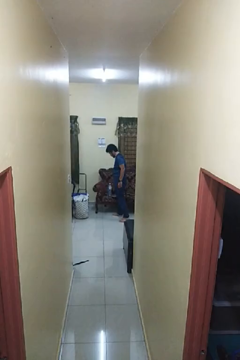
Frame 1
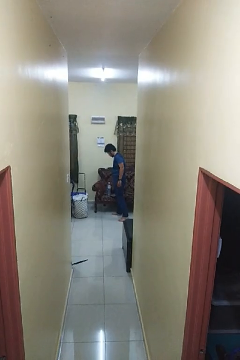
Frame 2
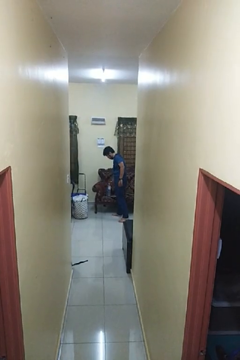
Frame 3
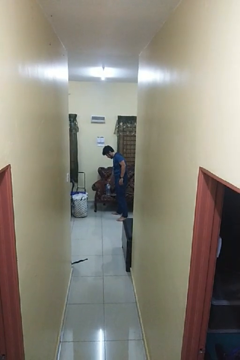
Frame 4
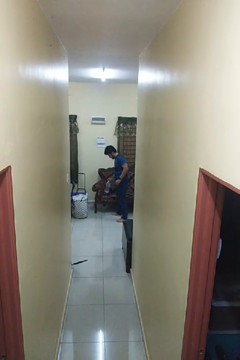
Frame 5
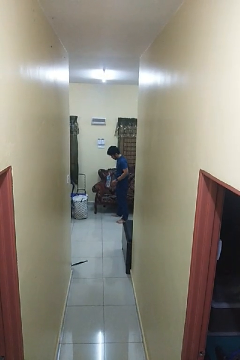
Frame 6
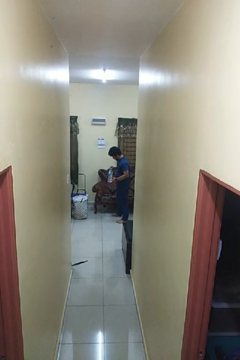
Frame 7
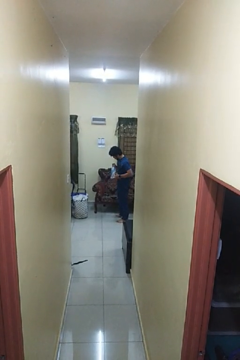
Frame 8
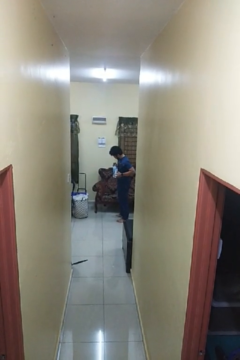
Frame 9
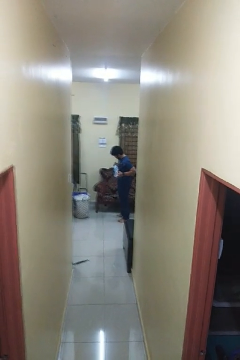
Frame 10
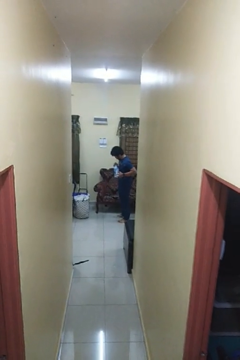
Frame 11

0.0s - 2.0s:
person picks up object from couch

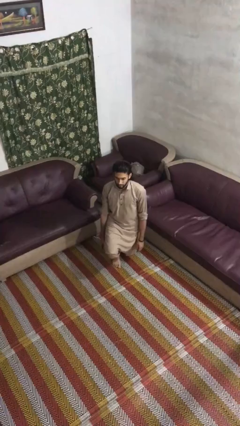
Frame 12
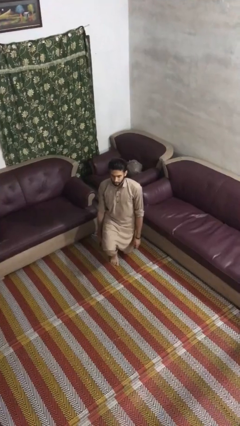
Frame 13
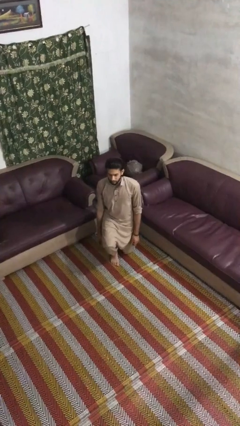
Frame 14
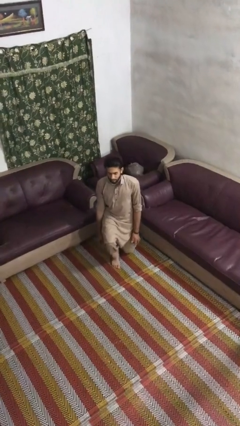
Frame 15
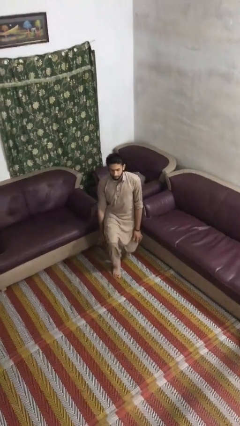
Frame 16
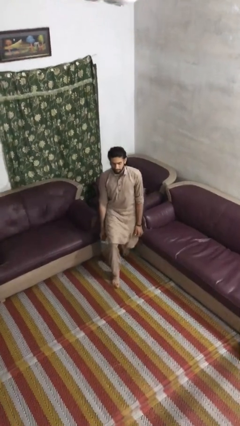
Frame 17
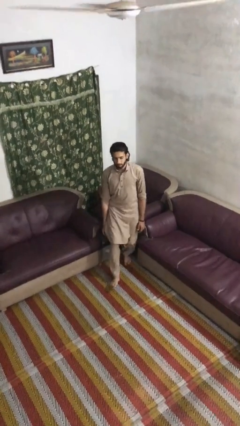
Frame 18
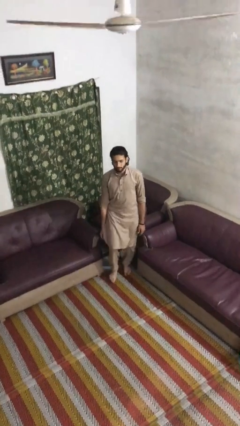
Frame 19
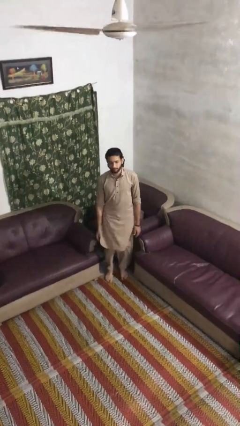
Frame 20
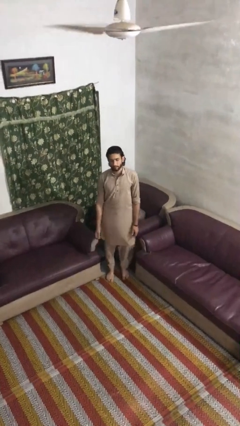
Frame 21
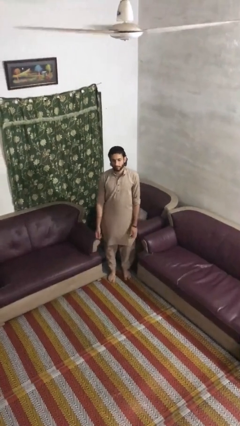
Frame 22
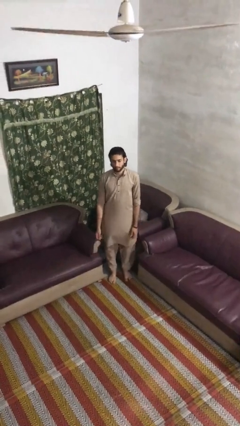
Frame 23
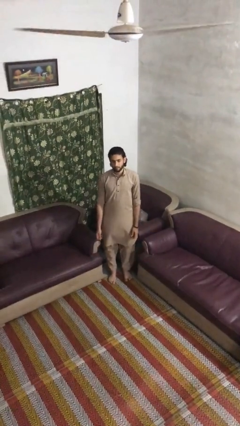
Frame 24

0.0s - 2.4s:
person stands up from floor

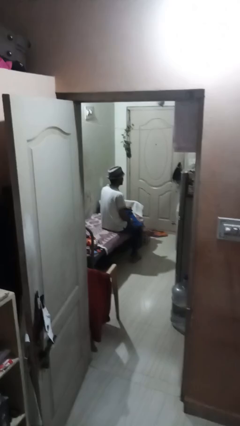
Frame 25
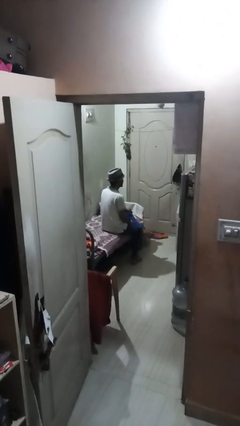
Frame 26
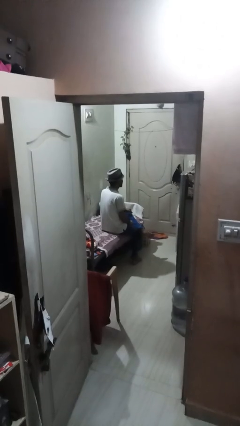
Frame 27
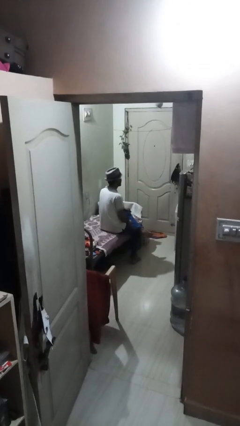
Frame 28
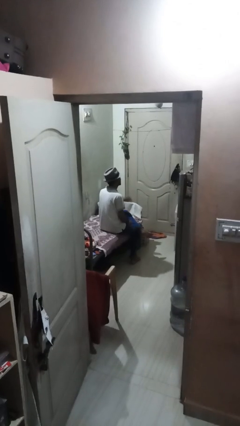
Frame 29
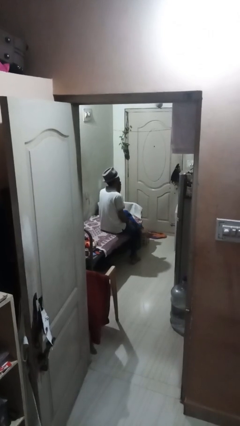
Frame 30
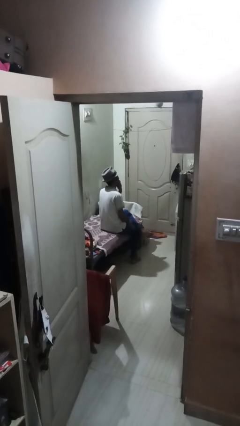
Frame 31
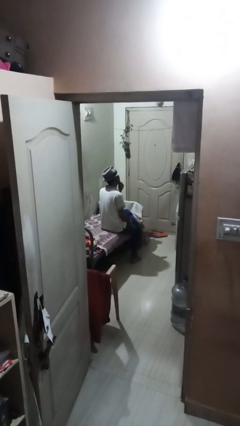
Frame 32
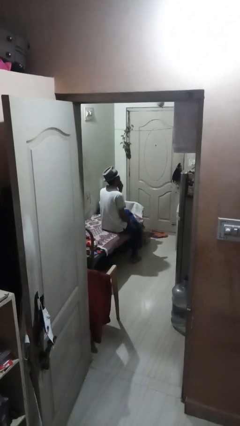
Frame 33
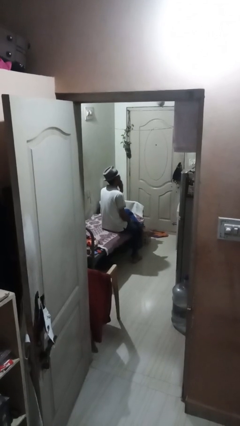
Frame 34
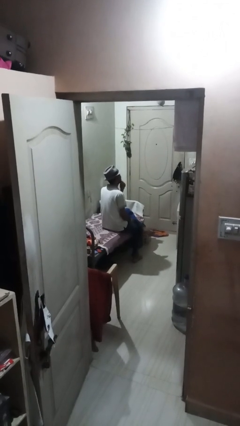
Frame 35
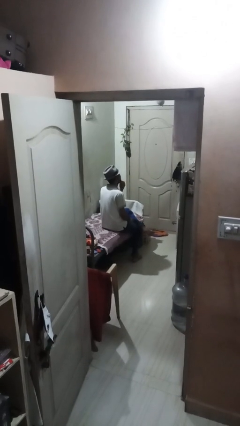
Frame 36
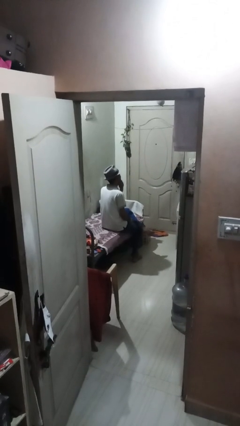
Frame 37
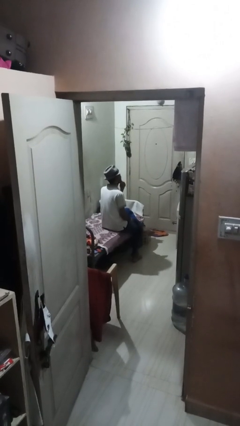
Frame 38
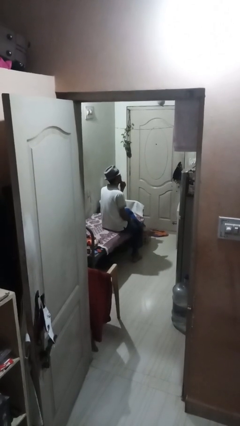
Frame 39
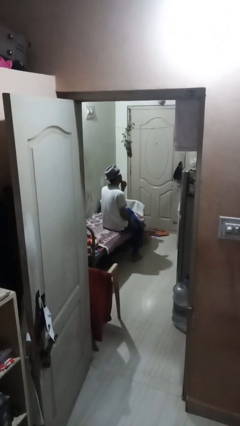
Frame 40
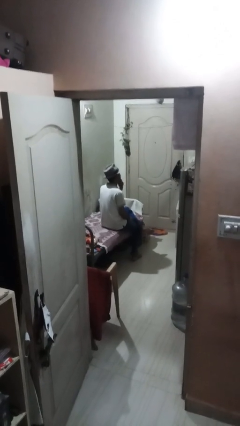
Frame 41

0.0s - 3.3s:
person strokes chin

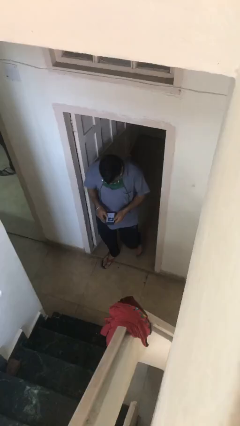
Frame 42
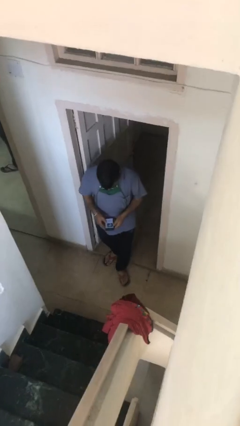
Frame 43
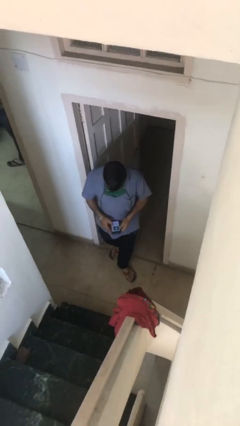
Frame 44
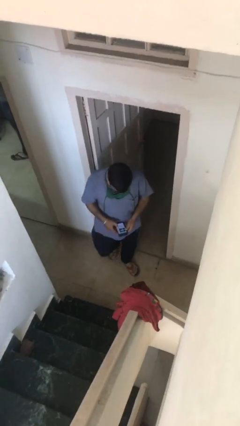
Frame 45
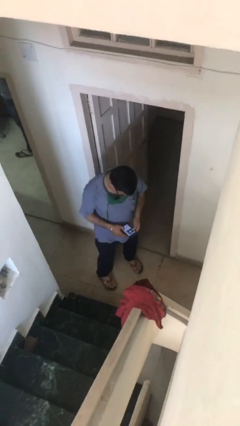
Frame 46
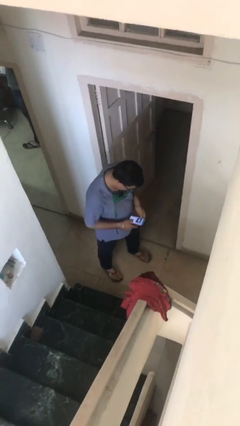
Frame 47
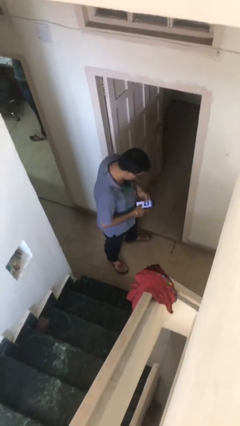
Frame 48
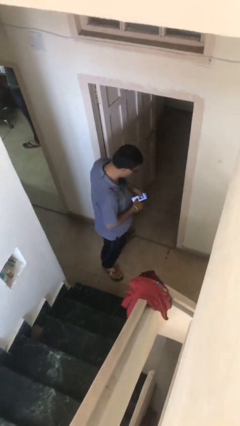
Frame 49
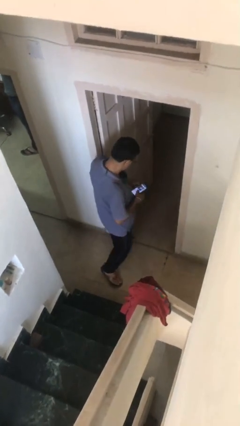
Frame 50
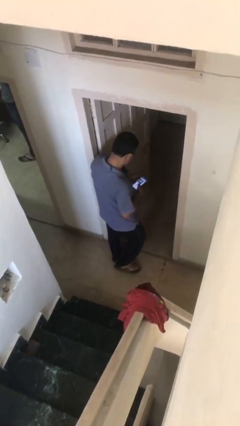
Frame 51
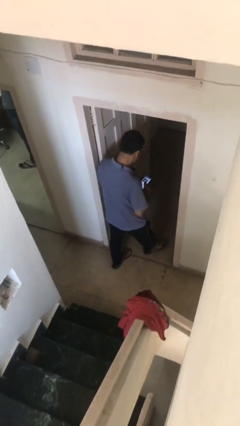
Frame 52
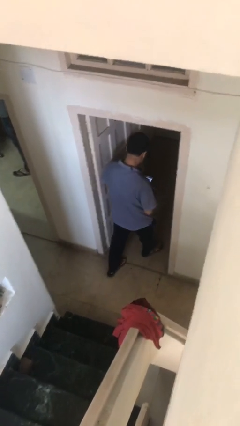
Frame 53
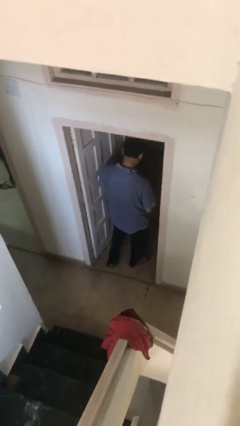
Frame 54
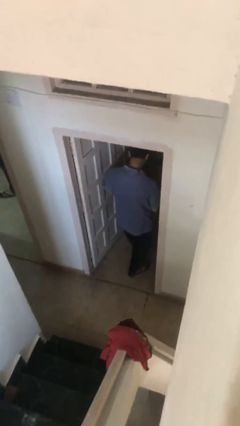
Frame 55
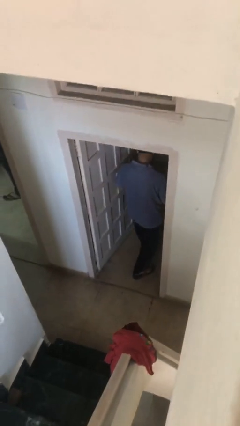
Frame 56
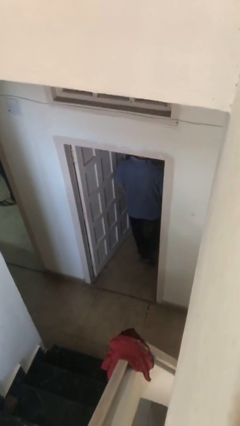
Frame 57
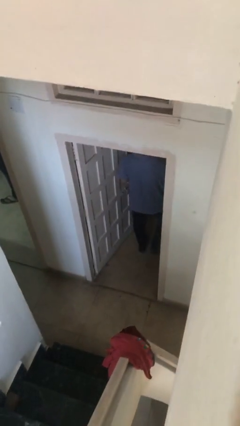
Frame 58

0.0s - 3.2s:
person exits scene through structure

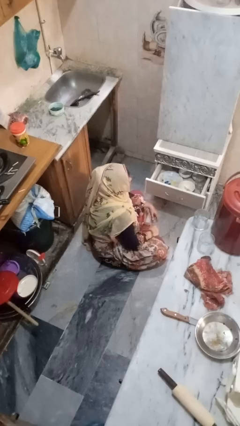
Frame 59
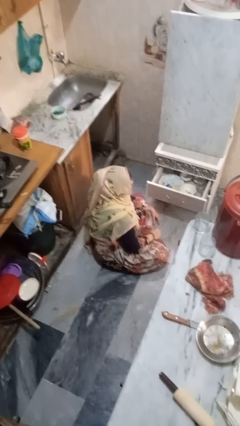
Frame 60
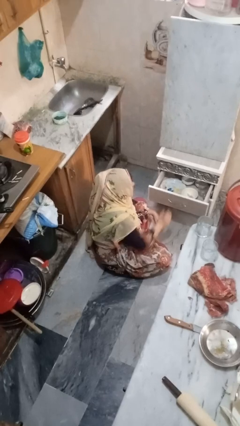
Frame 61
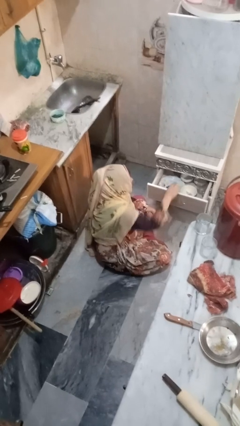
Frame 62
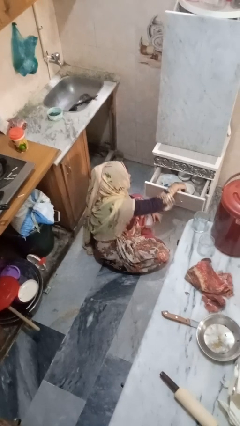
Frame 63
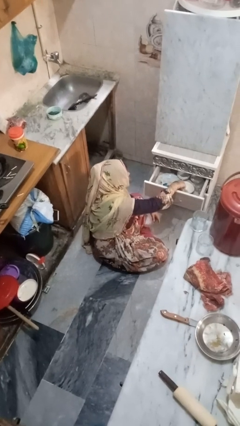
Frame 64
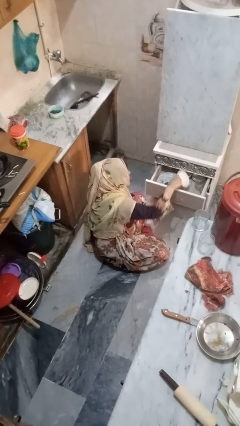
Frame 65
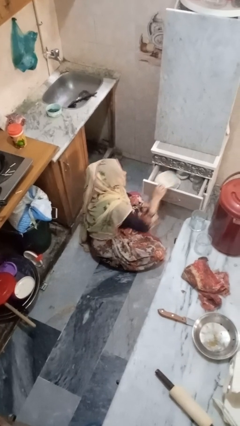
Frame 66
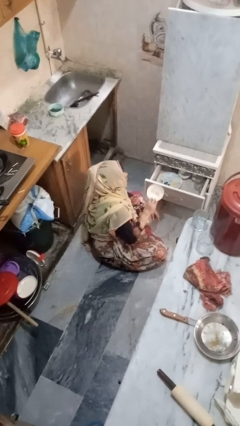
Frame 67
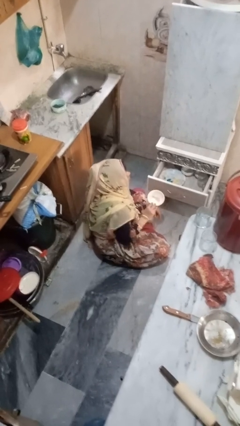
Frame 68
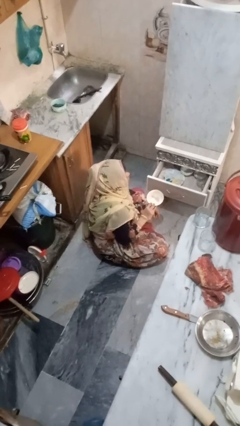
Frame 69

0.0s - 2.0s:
person takes object from kitchen drawer

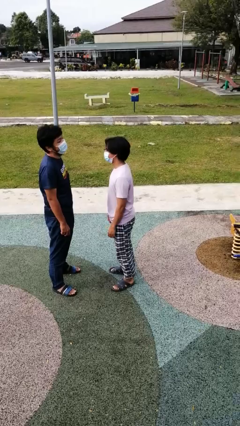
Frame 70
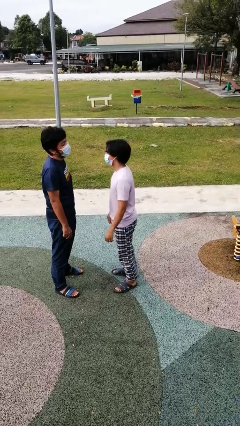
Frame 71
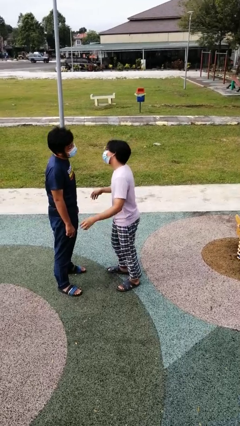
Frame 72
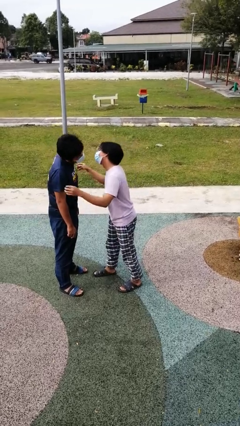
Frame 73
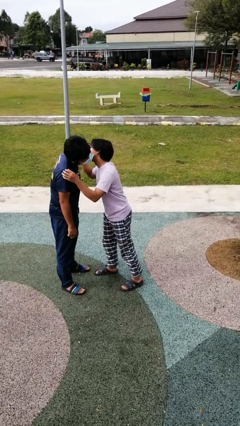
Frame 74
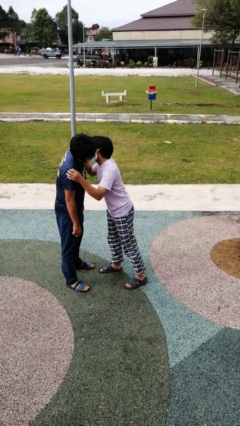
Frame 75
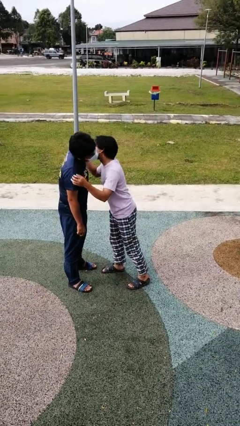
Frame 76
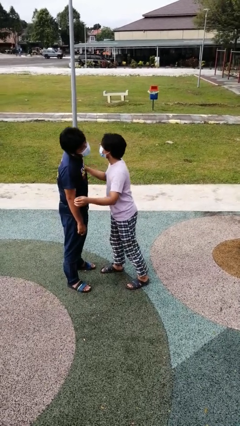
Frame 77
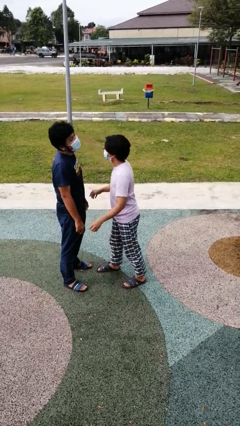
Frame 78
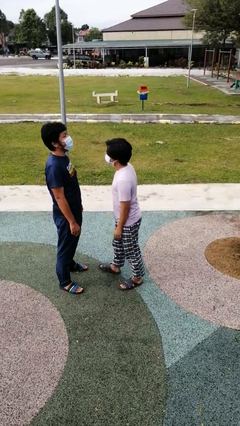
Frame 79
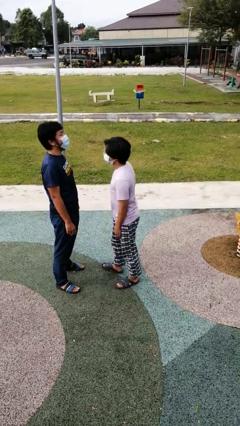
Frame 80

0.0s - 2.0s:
person kisses cheek of person

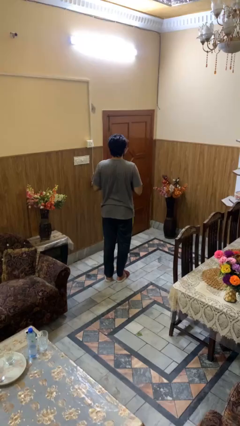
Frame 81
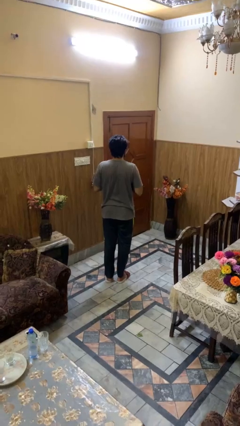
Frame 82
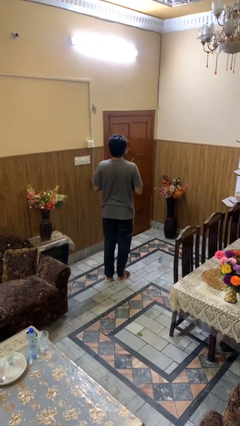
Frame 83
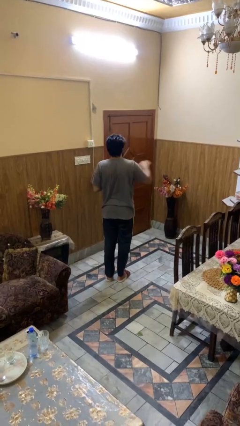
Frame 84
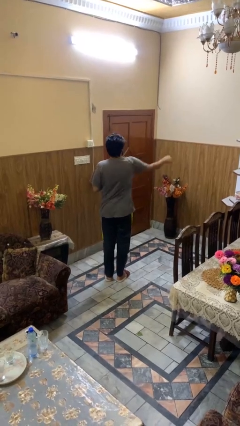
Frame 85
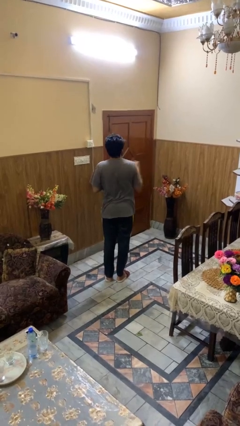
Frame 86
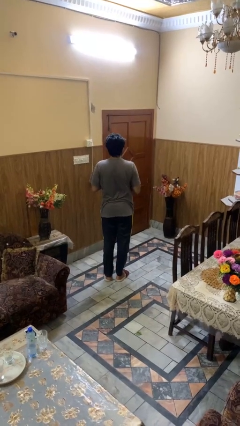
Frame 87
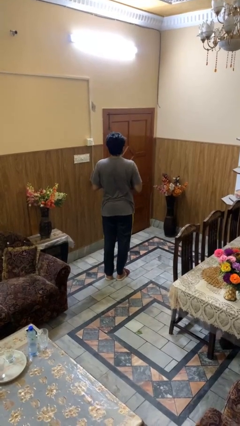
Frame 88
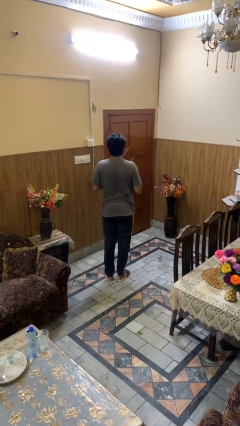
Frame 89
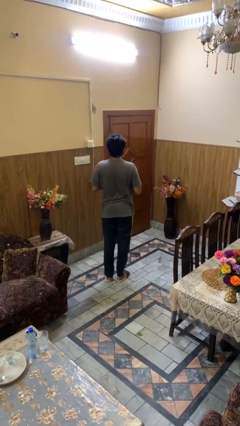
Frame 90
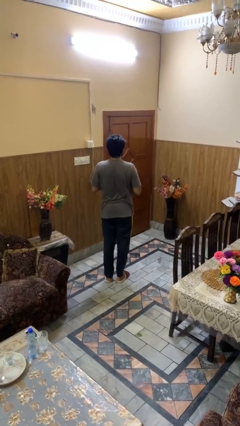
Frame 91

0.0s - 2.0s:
person karate chop

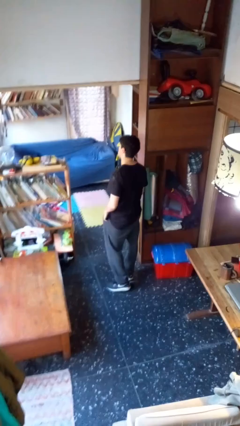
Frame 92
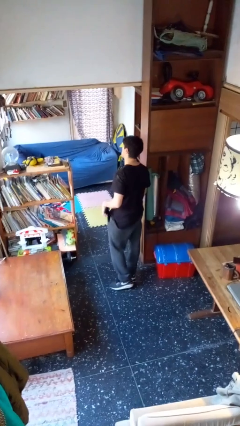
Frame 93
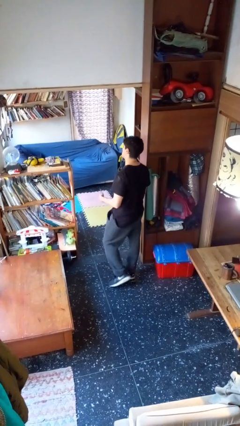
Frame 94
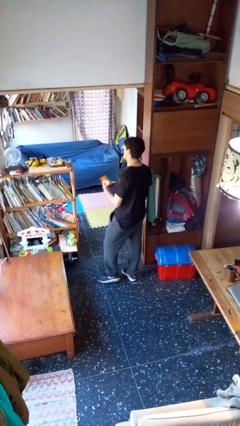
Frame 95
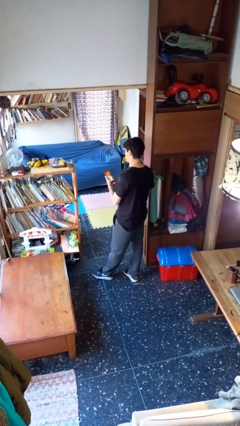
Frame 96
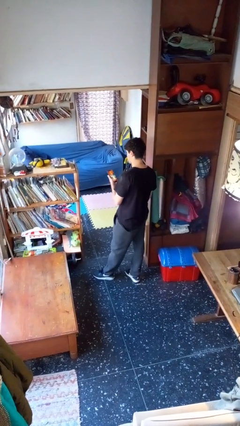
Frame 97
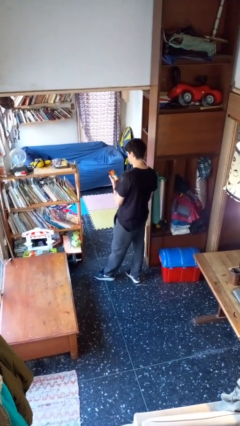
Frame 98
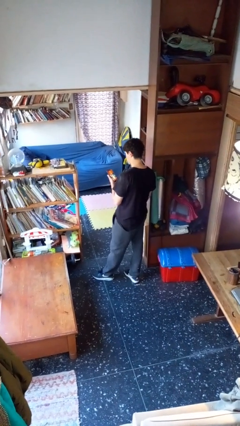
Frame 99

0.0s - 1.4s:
person takes phone from pocket
